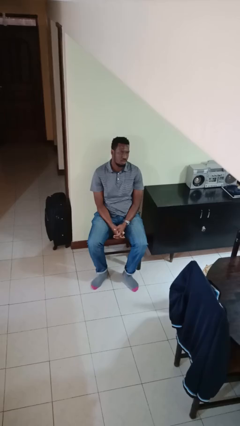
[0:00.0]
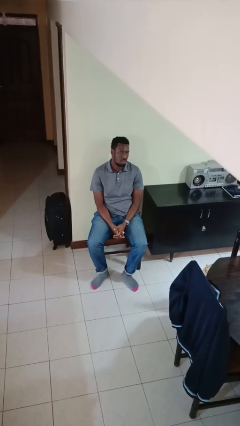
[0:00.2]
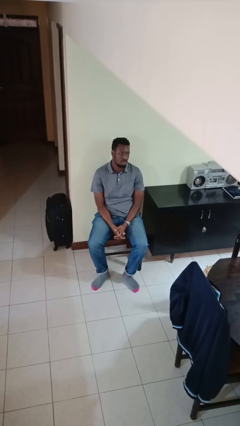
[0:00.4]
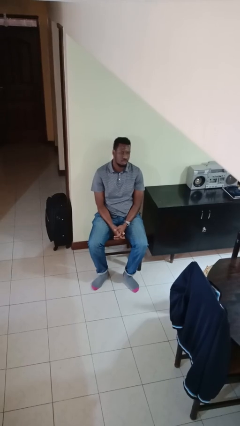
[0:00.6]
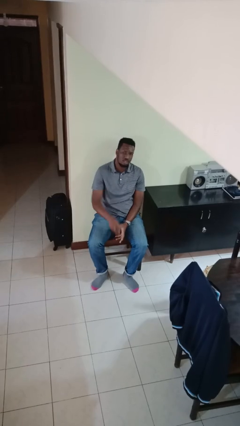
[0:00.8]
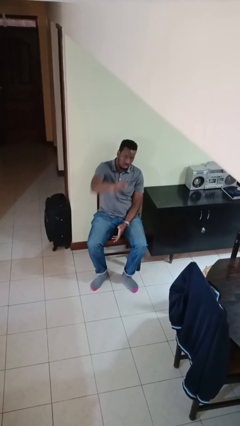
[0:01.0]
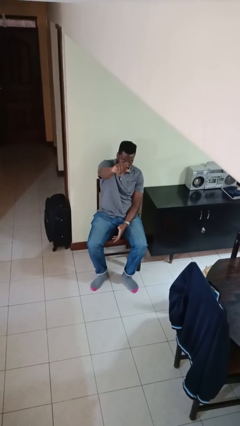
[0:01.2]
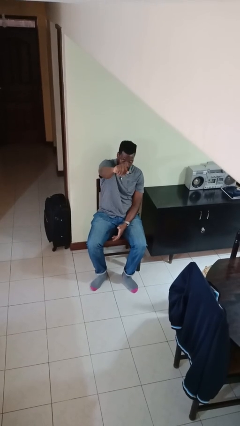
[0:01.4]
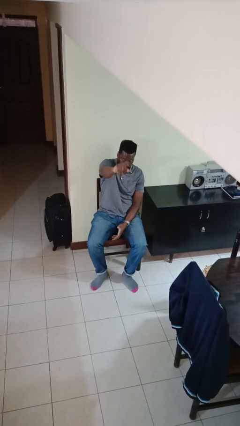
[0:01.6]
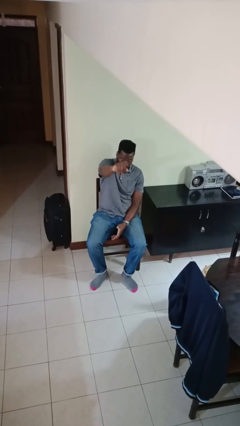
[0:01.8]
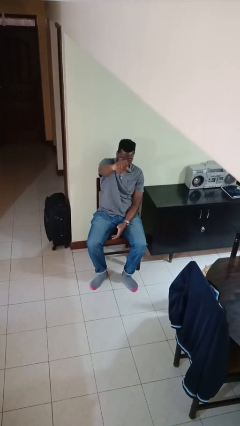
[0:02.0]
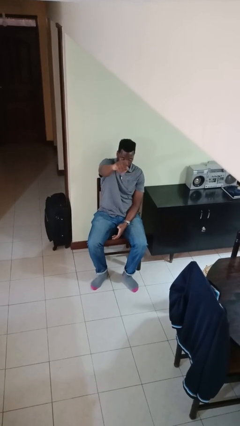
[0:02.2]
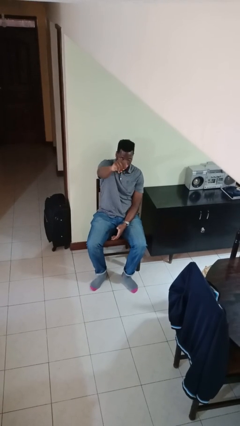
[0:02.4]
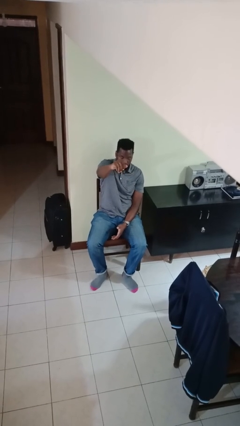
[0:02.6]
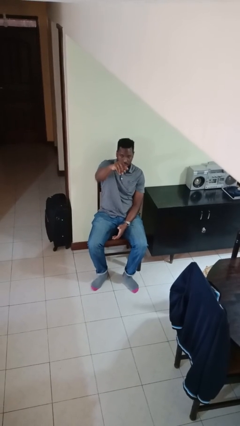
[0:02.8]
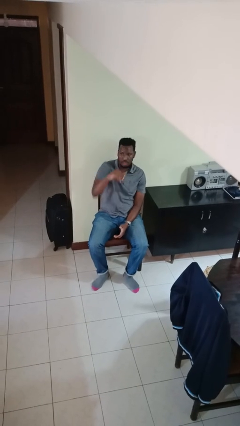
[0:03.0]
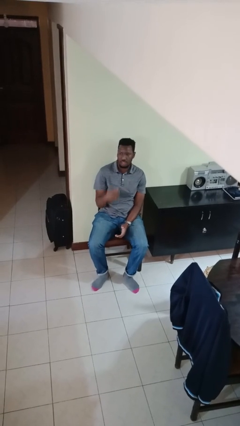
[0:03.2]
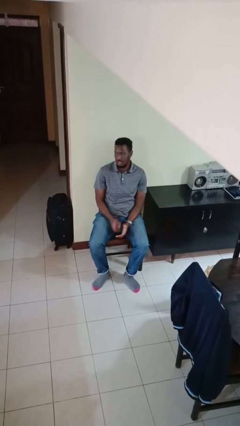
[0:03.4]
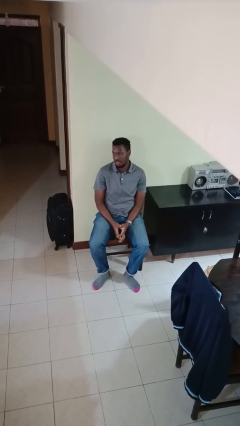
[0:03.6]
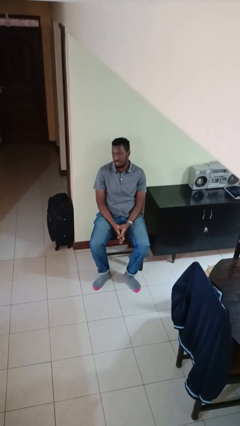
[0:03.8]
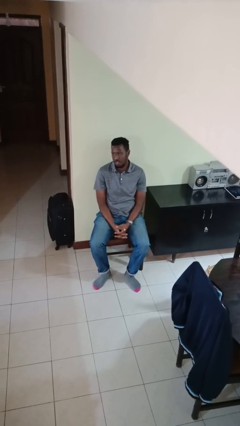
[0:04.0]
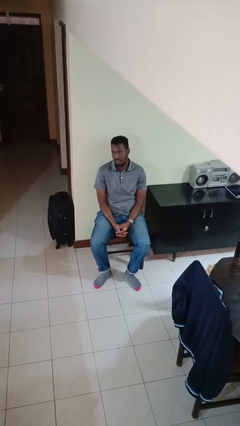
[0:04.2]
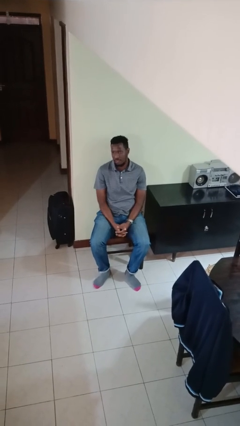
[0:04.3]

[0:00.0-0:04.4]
person gestures come here

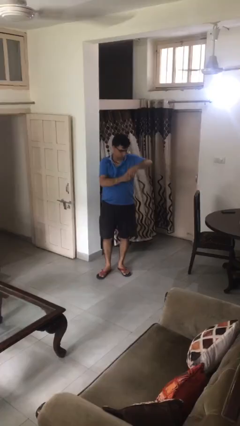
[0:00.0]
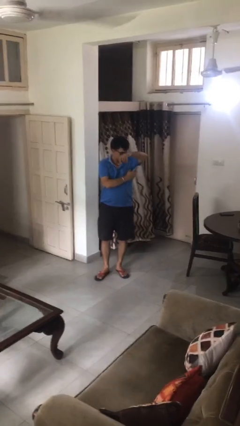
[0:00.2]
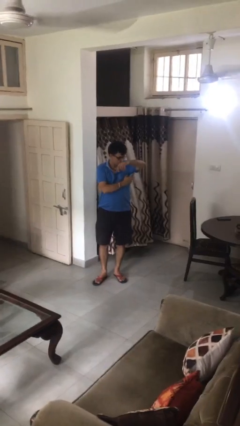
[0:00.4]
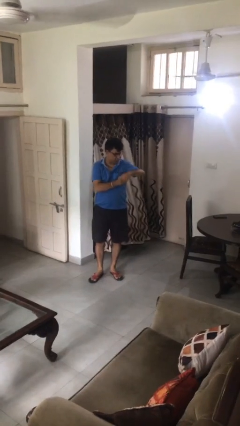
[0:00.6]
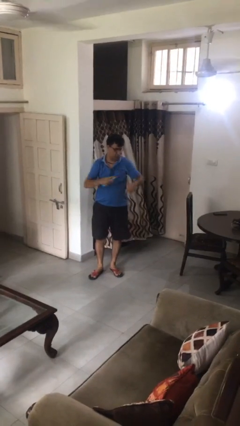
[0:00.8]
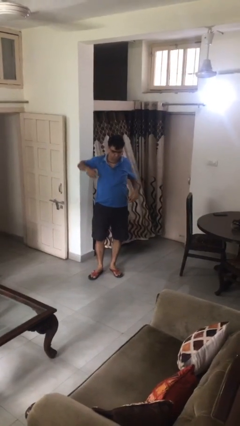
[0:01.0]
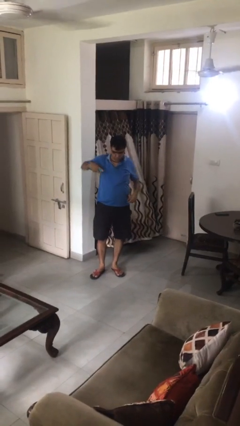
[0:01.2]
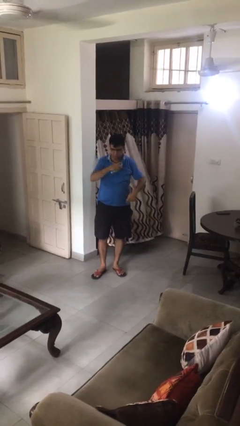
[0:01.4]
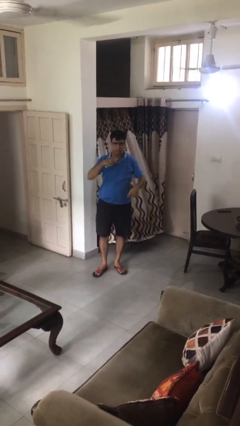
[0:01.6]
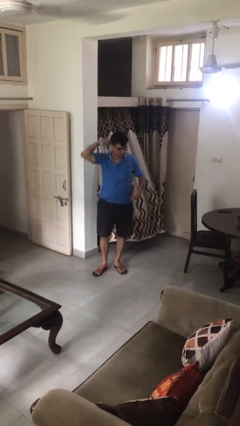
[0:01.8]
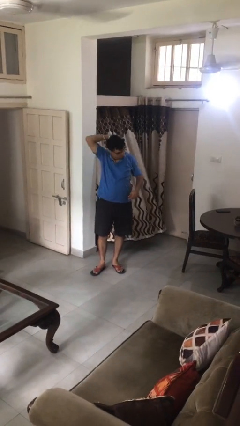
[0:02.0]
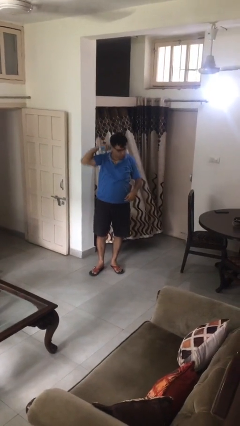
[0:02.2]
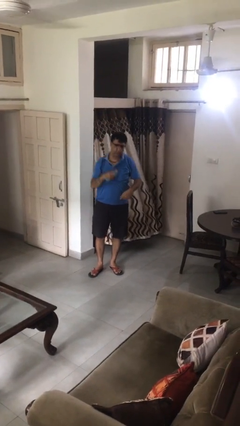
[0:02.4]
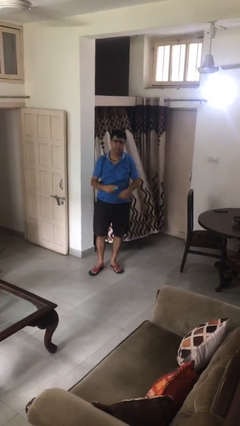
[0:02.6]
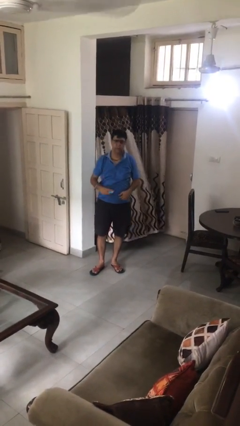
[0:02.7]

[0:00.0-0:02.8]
person applies deodorant

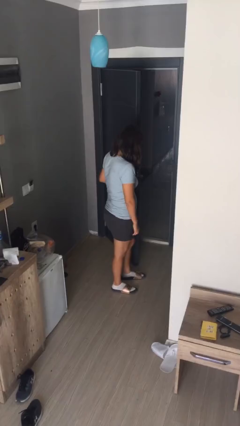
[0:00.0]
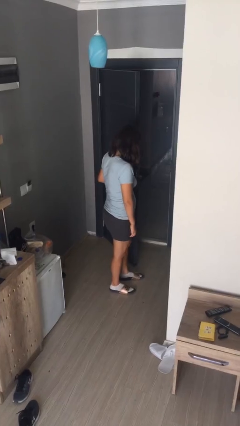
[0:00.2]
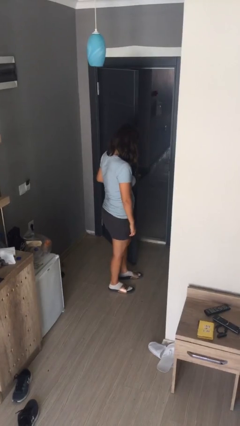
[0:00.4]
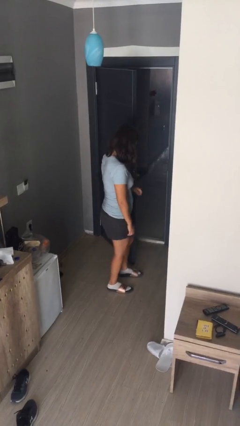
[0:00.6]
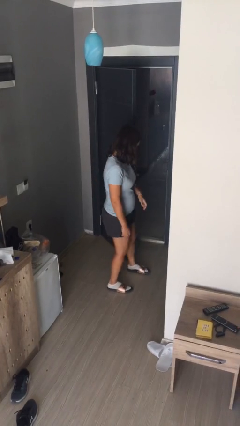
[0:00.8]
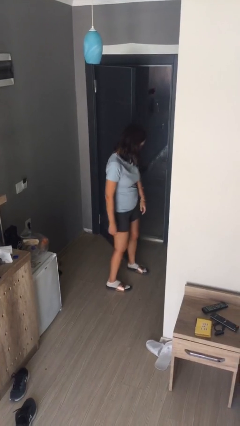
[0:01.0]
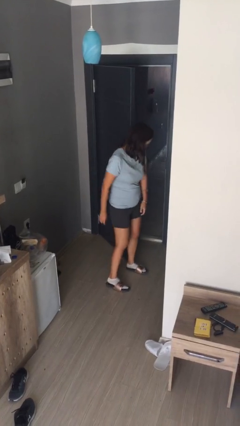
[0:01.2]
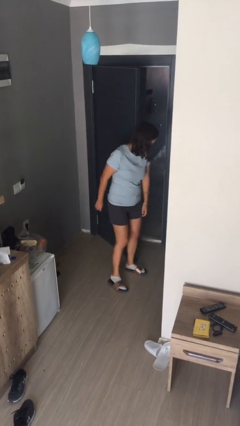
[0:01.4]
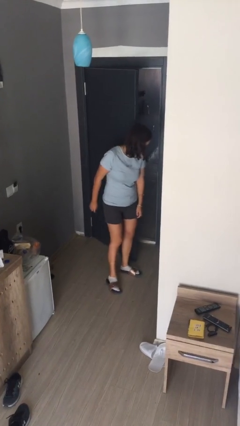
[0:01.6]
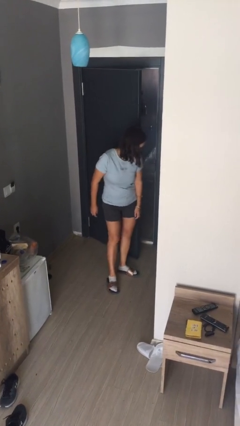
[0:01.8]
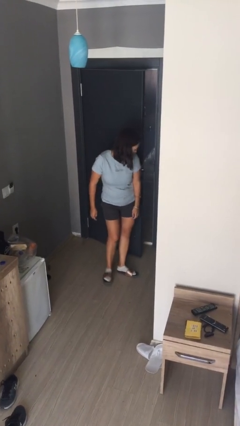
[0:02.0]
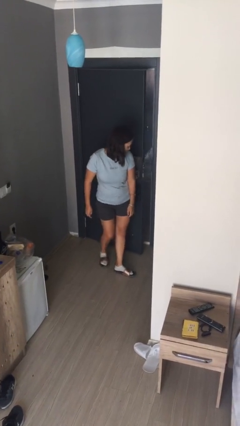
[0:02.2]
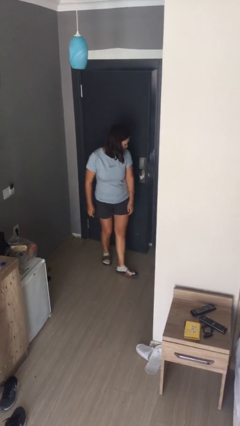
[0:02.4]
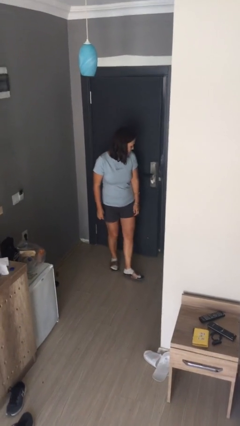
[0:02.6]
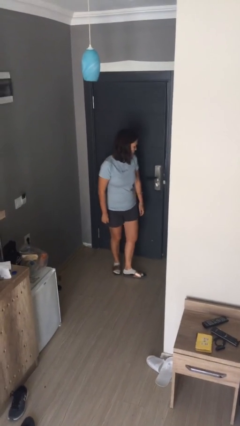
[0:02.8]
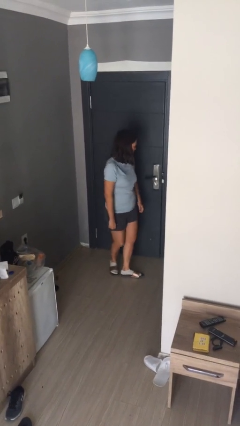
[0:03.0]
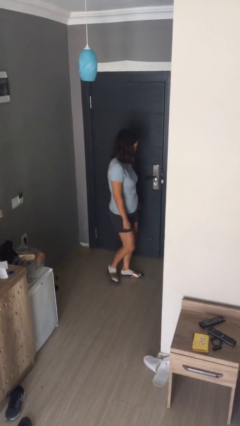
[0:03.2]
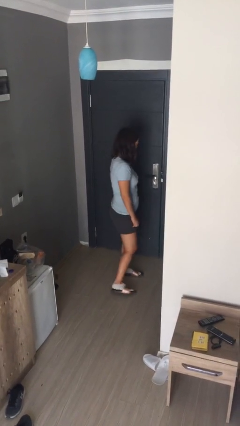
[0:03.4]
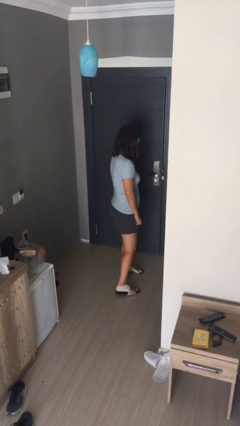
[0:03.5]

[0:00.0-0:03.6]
person closes door with hip

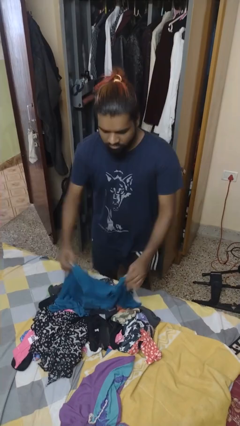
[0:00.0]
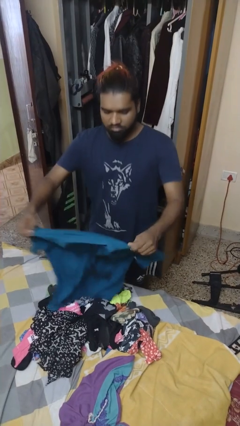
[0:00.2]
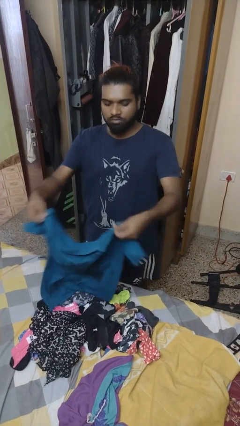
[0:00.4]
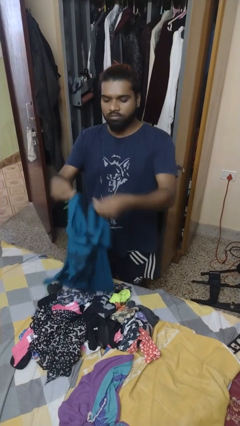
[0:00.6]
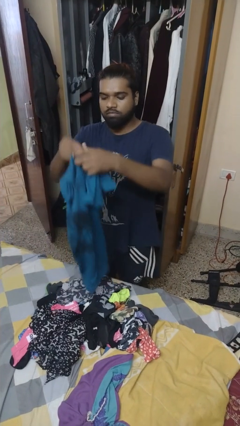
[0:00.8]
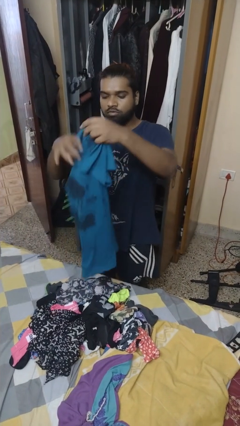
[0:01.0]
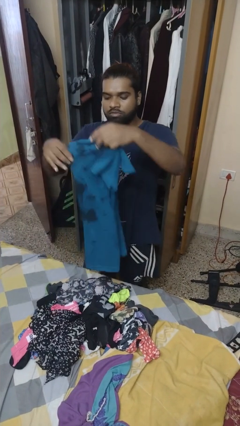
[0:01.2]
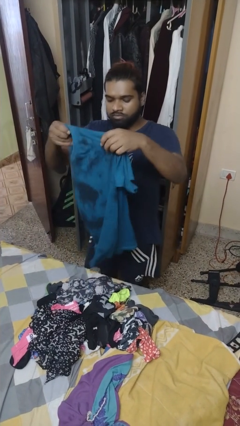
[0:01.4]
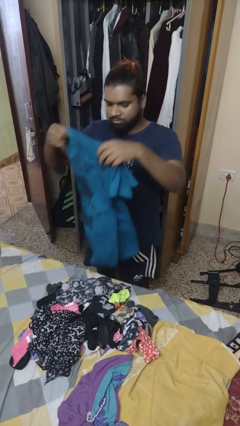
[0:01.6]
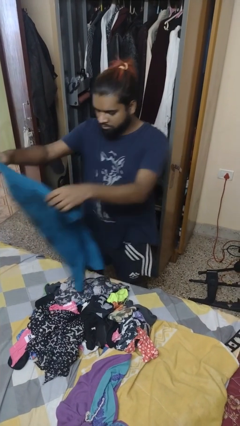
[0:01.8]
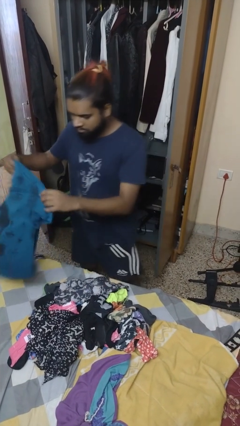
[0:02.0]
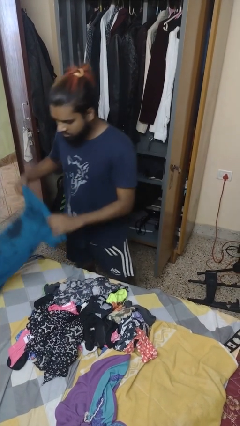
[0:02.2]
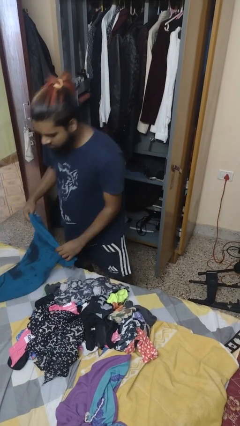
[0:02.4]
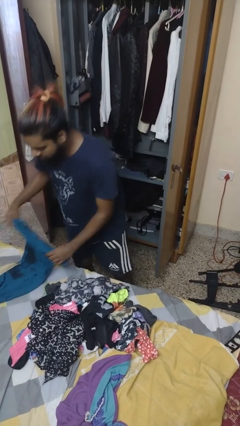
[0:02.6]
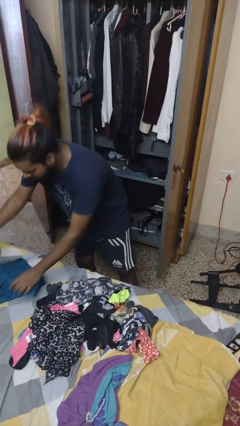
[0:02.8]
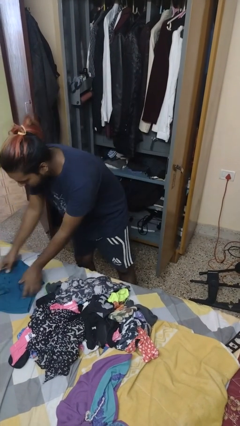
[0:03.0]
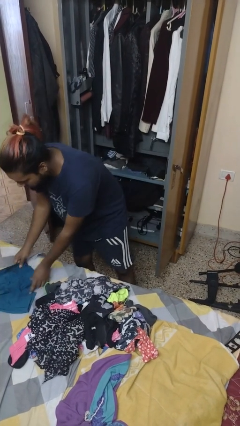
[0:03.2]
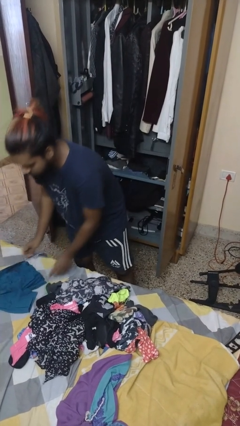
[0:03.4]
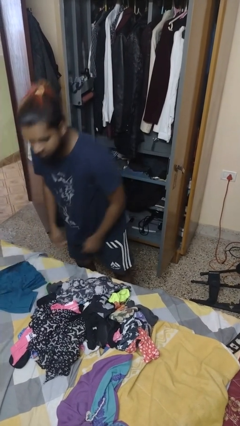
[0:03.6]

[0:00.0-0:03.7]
person folds shirt

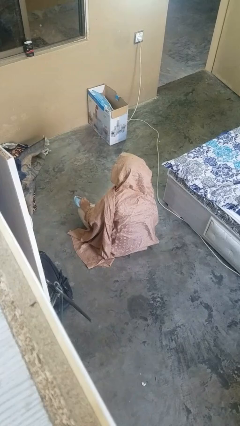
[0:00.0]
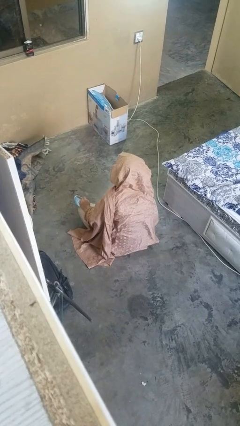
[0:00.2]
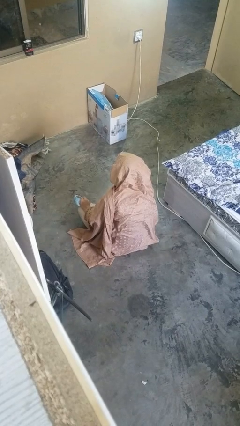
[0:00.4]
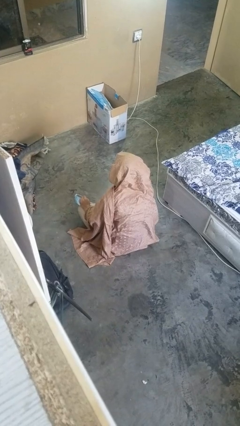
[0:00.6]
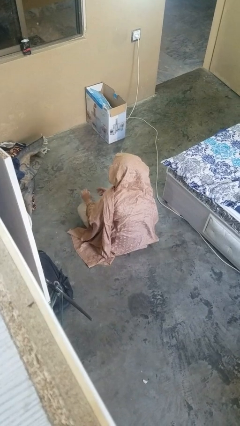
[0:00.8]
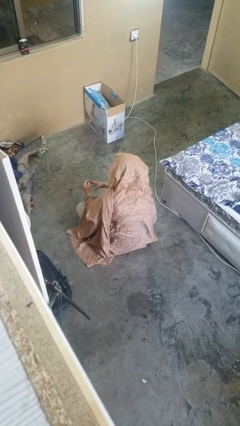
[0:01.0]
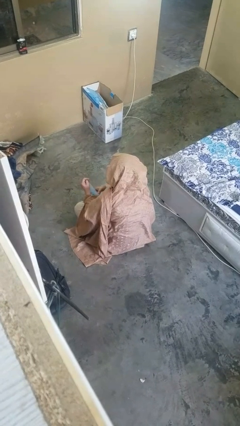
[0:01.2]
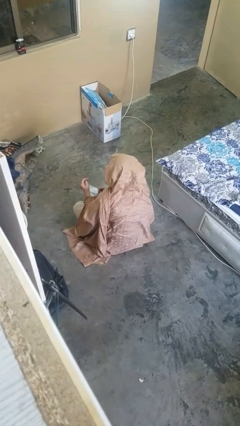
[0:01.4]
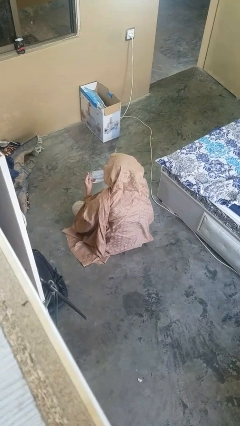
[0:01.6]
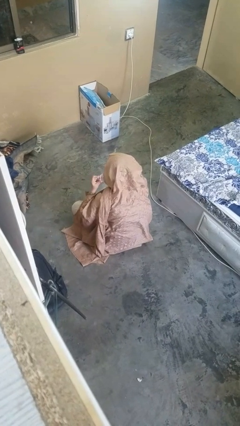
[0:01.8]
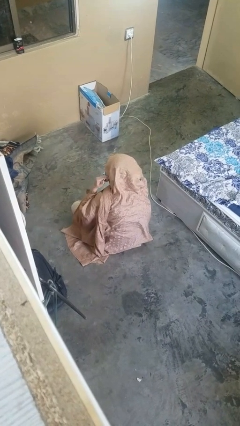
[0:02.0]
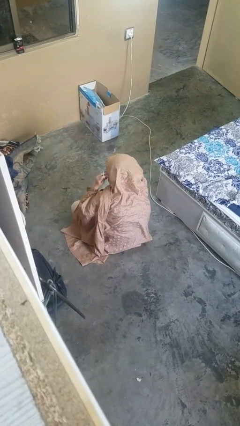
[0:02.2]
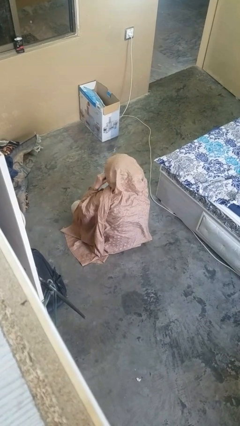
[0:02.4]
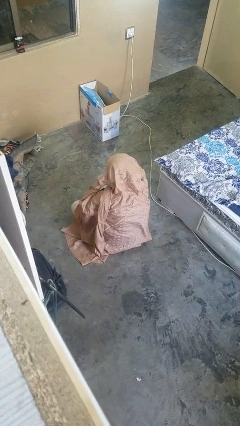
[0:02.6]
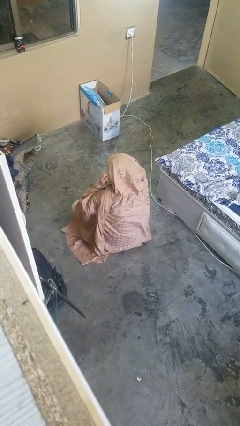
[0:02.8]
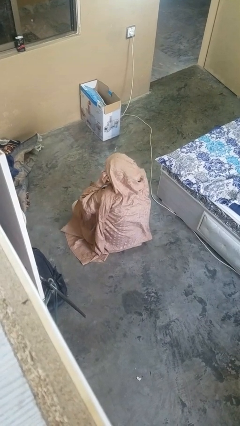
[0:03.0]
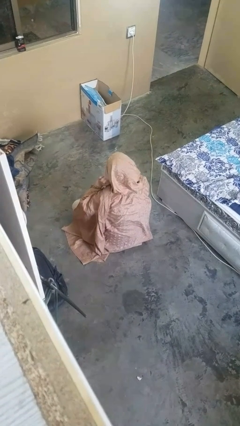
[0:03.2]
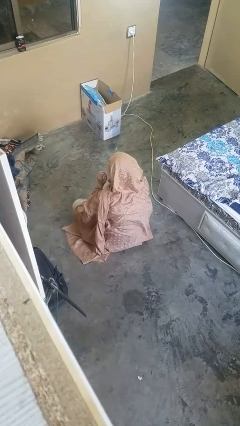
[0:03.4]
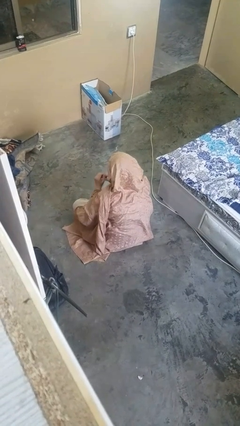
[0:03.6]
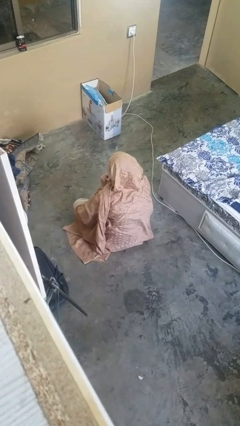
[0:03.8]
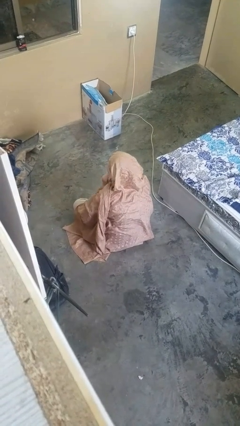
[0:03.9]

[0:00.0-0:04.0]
person puts on facemask
